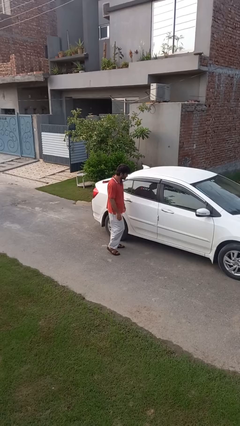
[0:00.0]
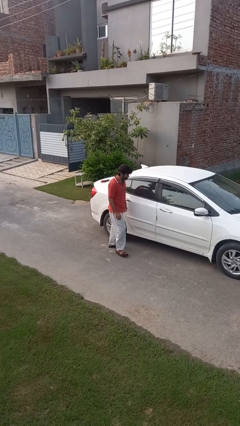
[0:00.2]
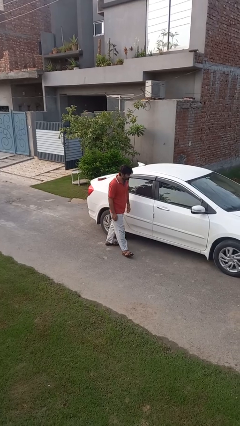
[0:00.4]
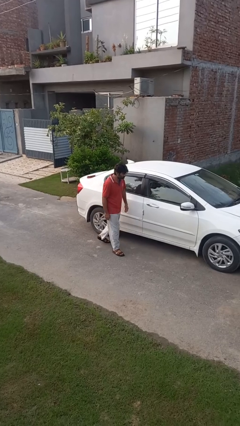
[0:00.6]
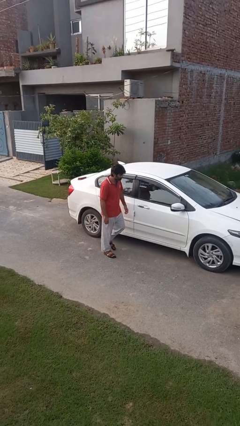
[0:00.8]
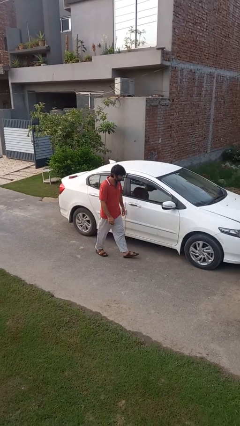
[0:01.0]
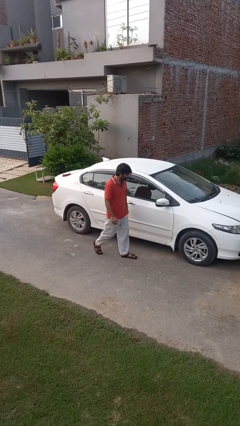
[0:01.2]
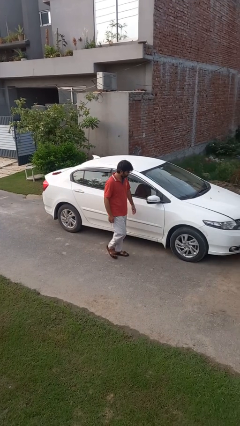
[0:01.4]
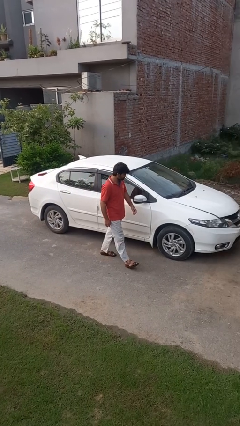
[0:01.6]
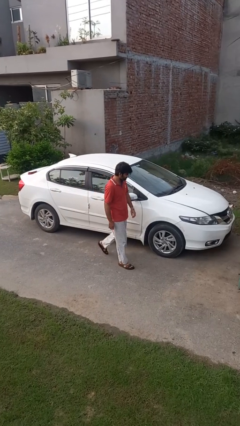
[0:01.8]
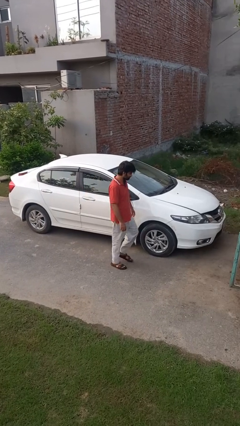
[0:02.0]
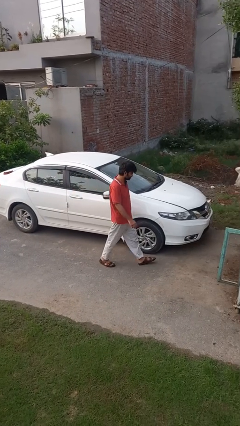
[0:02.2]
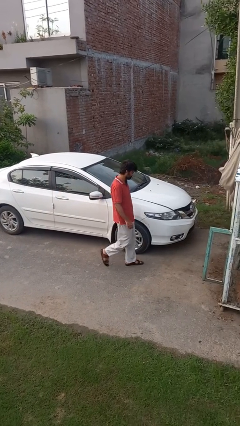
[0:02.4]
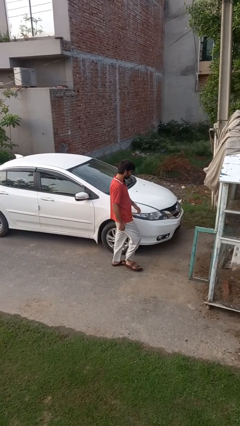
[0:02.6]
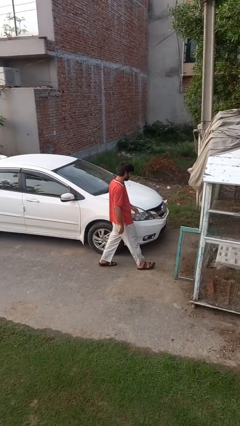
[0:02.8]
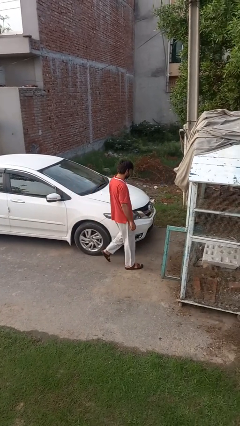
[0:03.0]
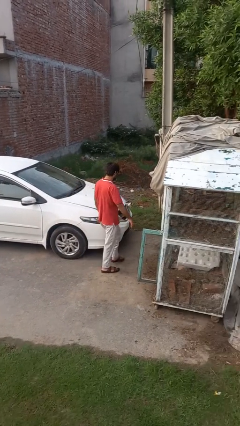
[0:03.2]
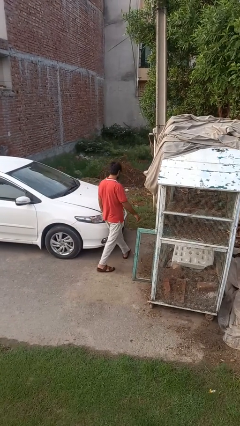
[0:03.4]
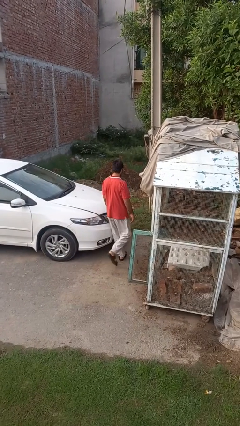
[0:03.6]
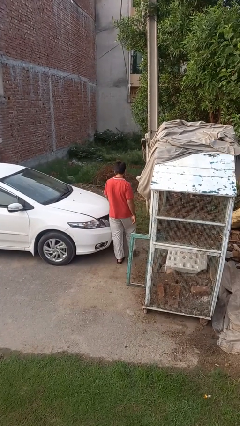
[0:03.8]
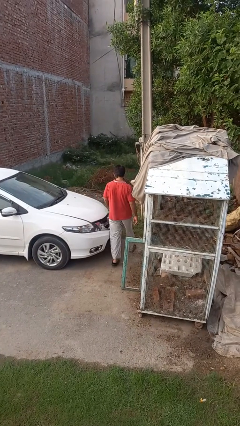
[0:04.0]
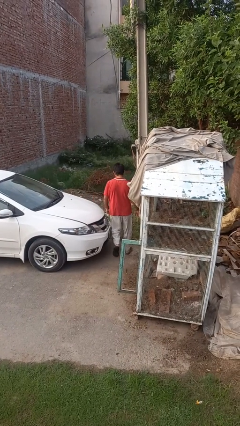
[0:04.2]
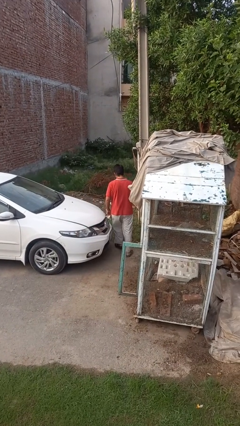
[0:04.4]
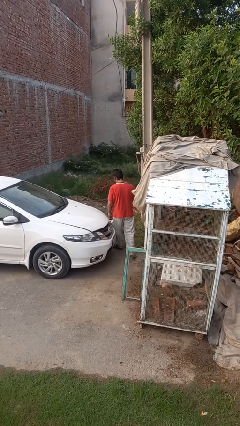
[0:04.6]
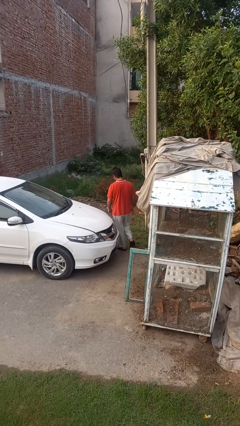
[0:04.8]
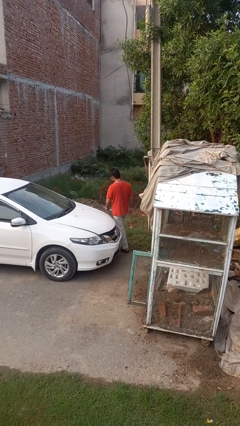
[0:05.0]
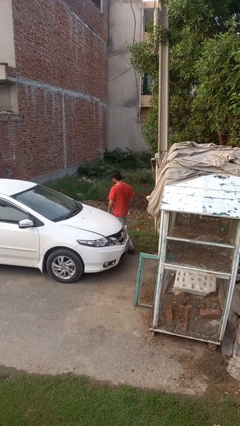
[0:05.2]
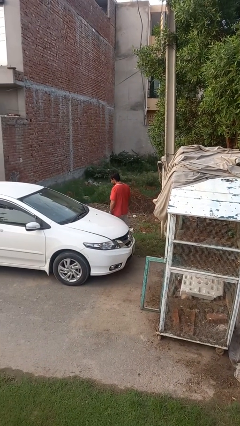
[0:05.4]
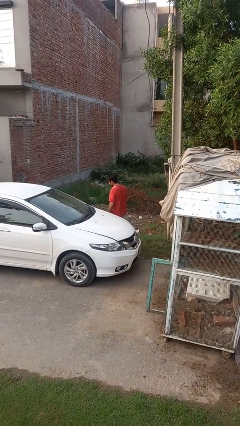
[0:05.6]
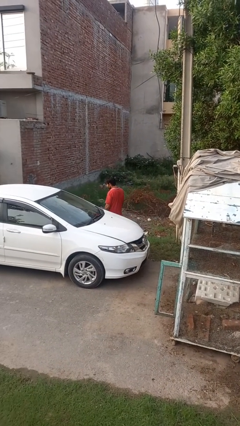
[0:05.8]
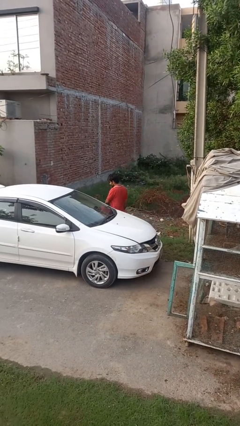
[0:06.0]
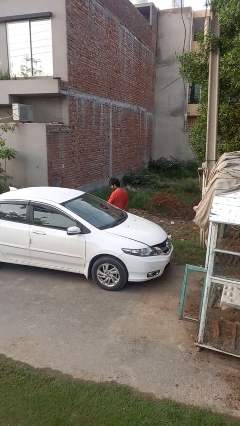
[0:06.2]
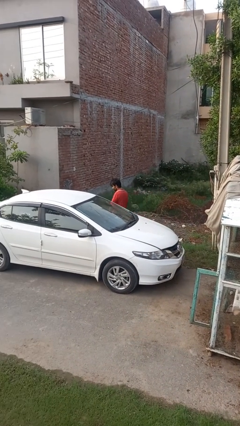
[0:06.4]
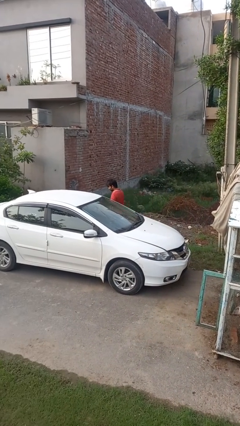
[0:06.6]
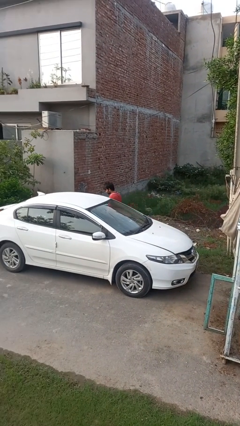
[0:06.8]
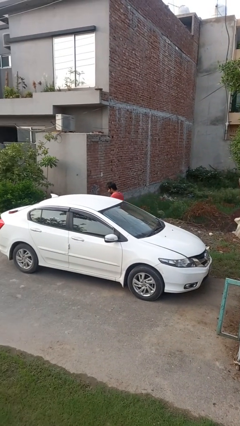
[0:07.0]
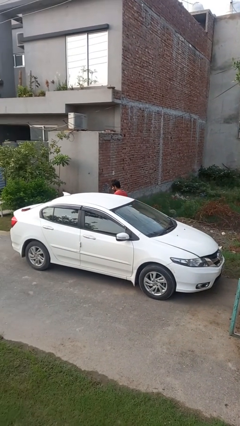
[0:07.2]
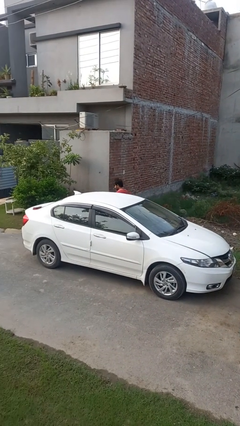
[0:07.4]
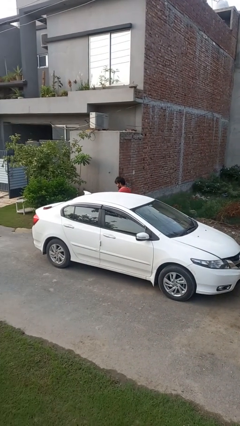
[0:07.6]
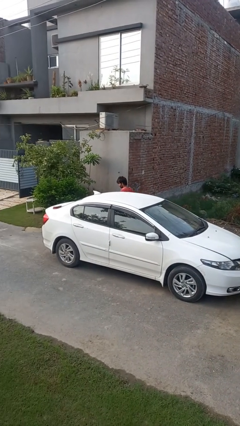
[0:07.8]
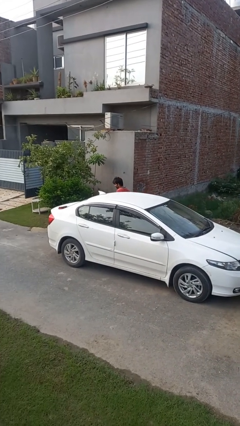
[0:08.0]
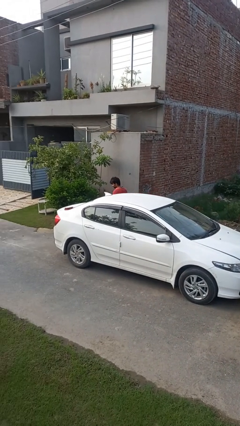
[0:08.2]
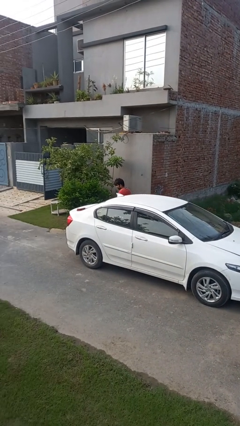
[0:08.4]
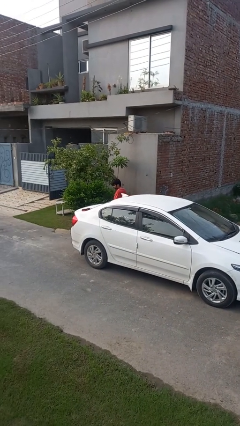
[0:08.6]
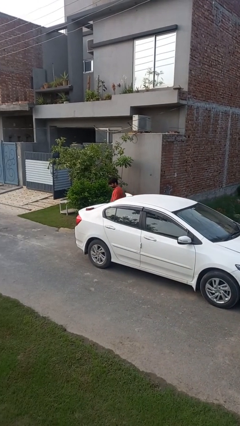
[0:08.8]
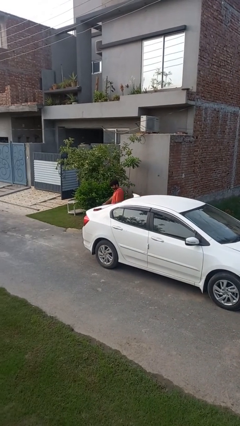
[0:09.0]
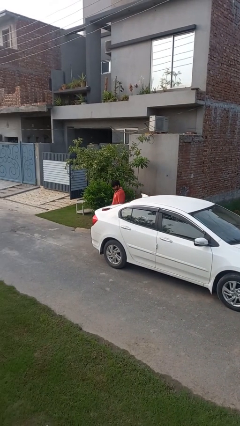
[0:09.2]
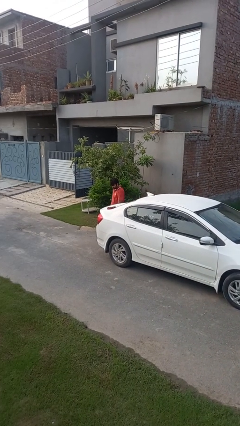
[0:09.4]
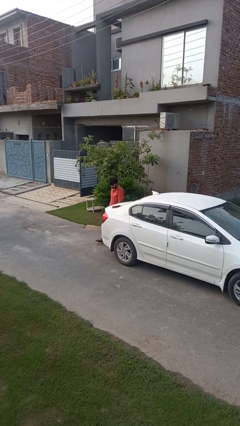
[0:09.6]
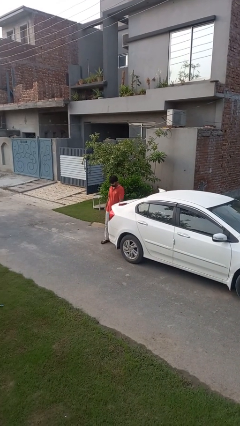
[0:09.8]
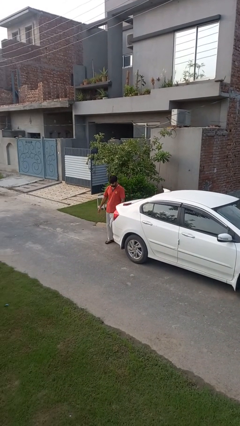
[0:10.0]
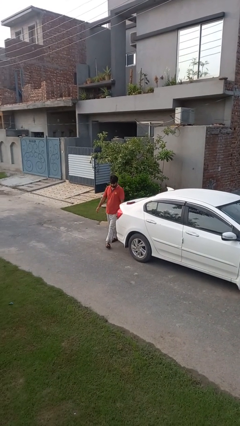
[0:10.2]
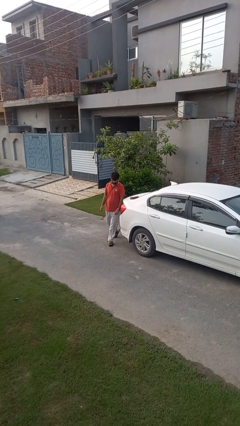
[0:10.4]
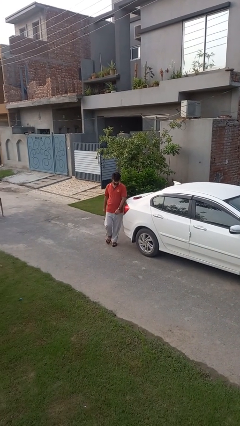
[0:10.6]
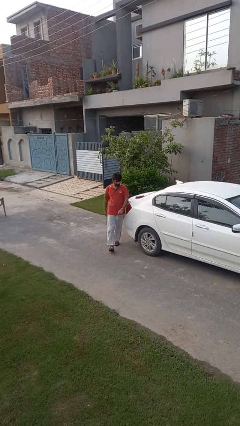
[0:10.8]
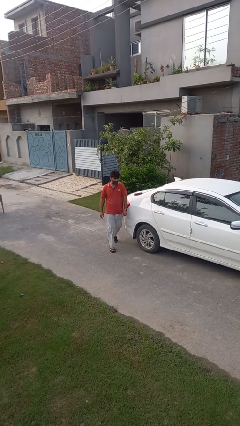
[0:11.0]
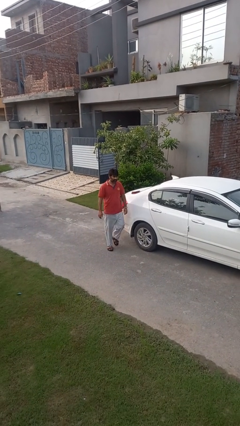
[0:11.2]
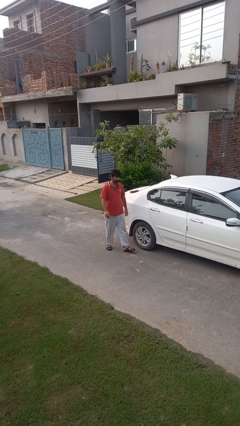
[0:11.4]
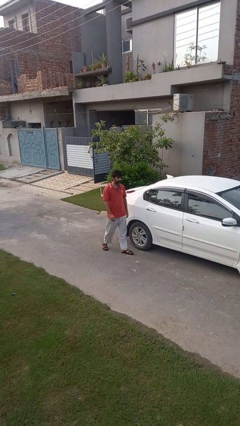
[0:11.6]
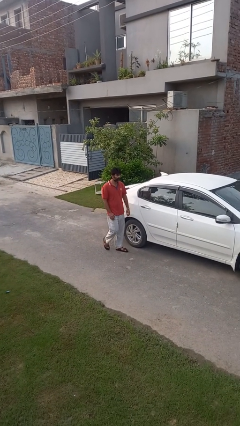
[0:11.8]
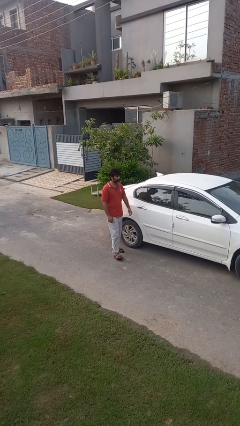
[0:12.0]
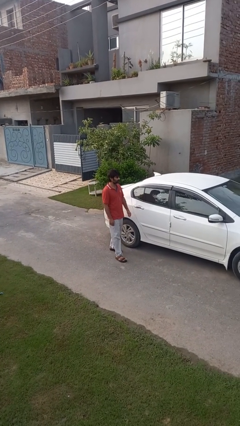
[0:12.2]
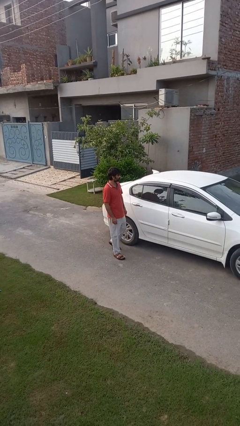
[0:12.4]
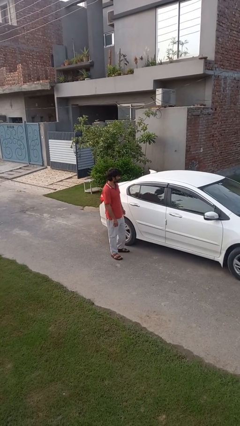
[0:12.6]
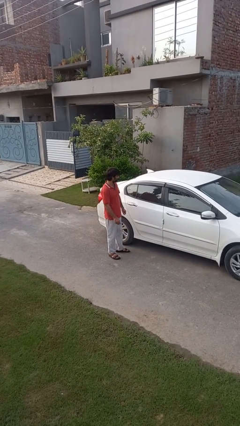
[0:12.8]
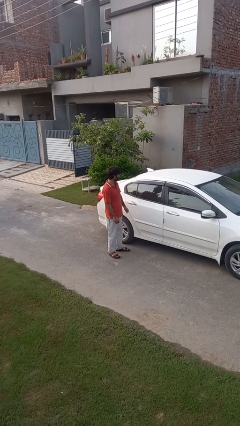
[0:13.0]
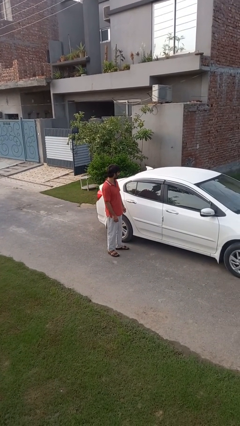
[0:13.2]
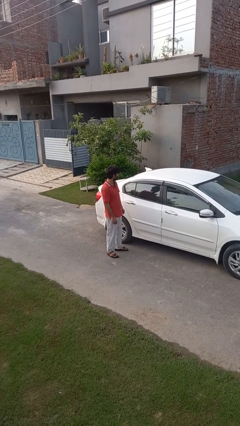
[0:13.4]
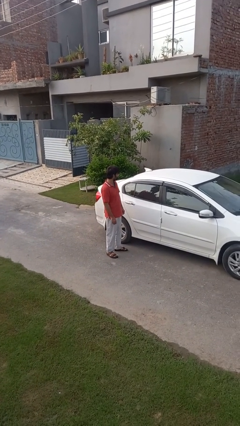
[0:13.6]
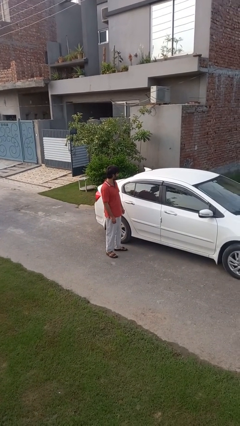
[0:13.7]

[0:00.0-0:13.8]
person walks around car

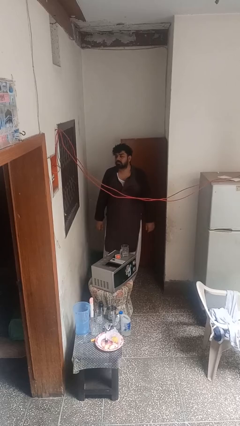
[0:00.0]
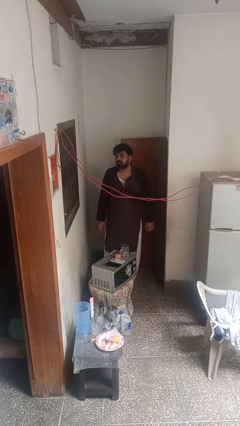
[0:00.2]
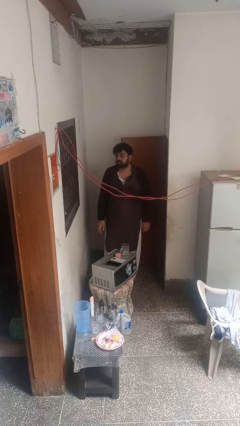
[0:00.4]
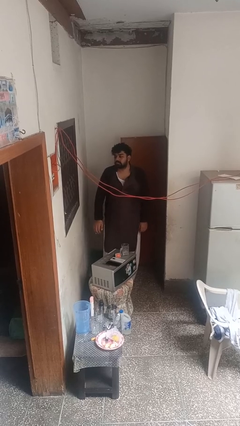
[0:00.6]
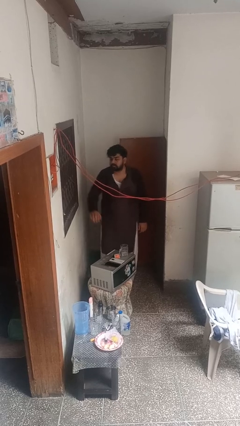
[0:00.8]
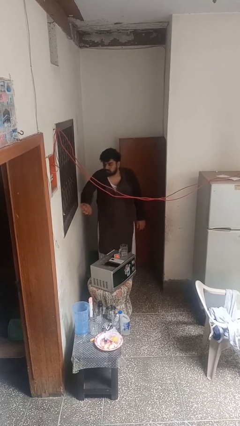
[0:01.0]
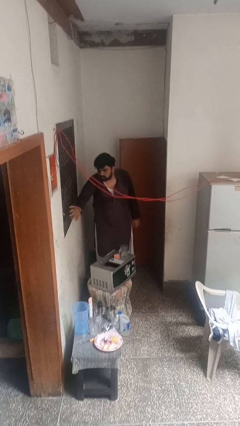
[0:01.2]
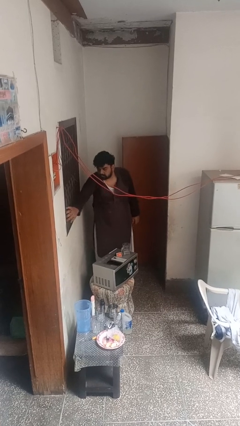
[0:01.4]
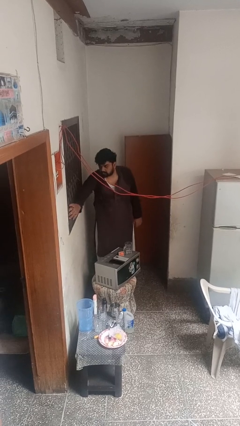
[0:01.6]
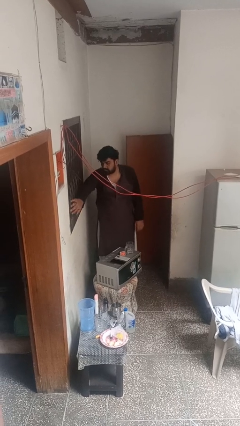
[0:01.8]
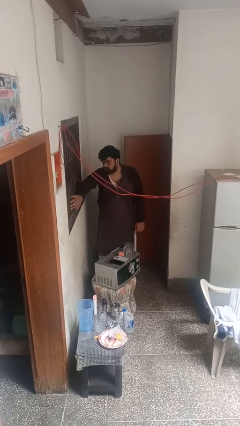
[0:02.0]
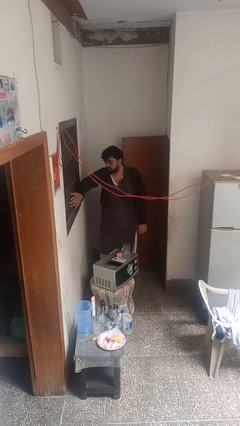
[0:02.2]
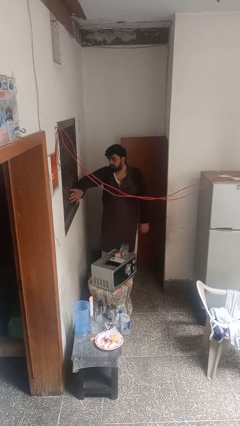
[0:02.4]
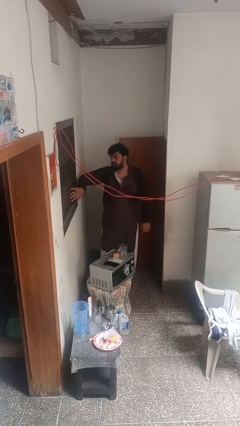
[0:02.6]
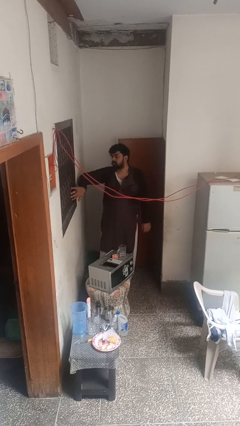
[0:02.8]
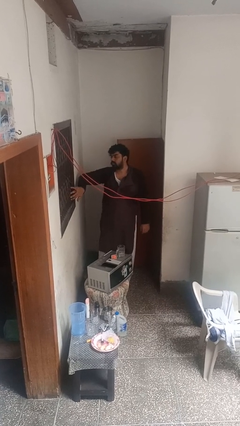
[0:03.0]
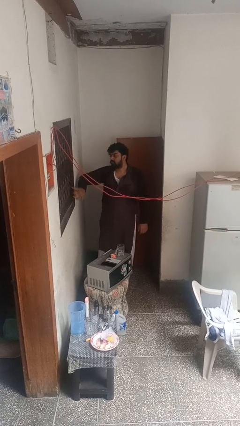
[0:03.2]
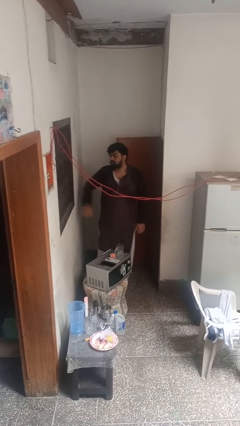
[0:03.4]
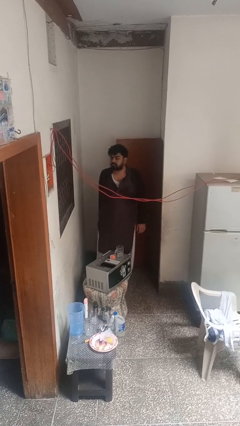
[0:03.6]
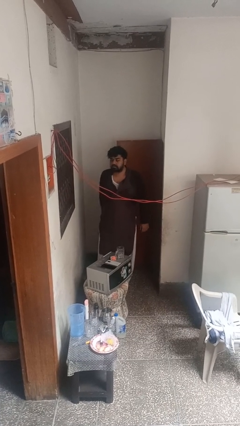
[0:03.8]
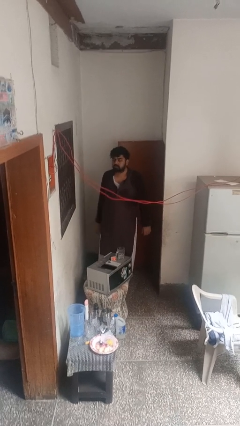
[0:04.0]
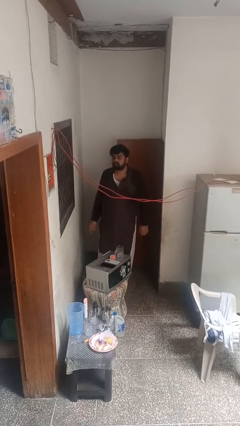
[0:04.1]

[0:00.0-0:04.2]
person closes home window

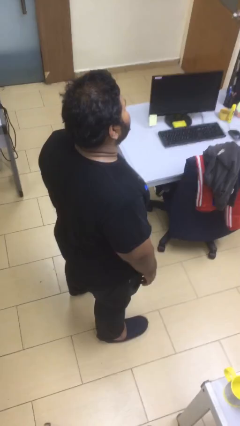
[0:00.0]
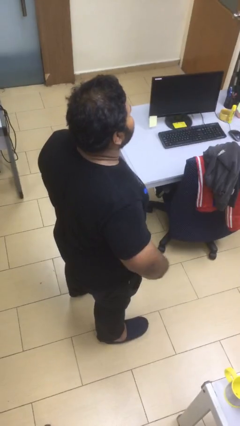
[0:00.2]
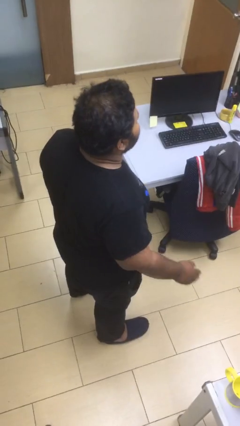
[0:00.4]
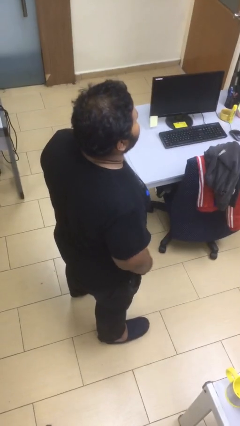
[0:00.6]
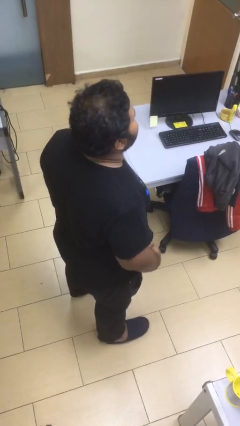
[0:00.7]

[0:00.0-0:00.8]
person slaps hands on thighs
